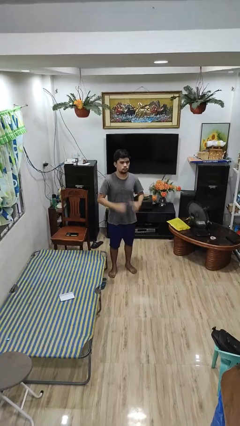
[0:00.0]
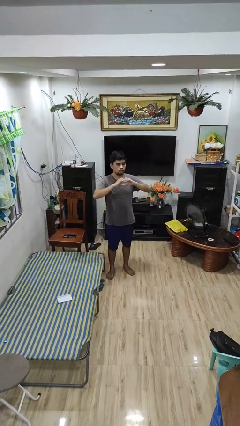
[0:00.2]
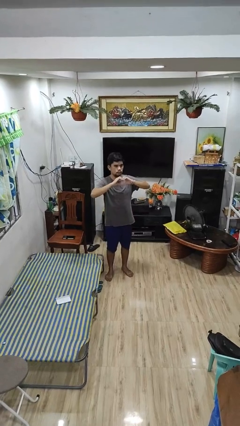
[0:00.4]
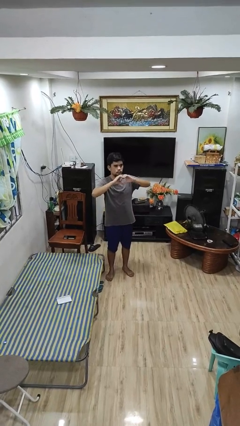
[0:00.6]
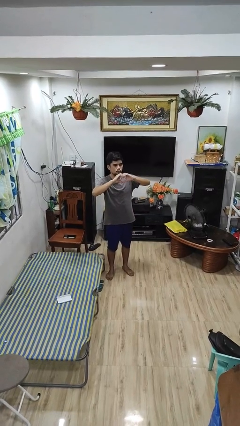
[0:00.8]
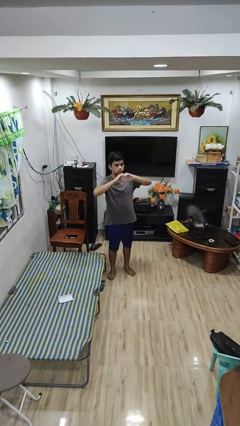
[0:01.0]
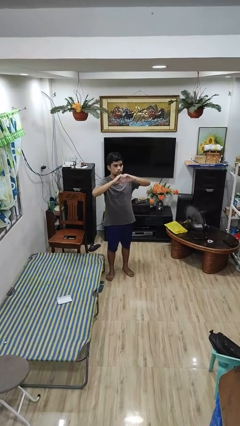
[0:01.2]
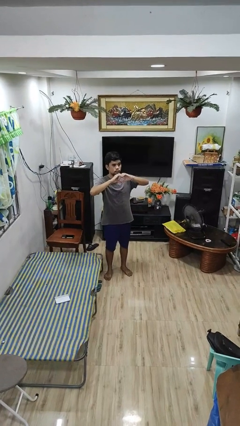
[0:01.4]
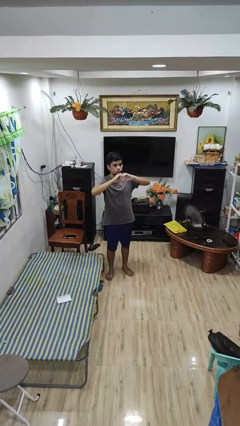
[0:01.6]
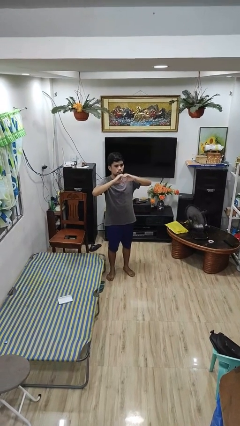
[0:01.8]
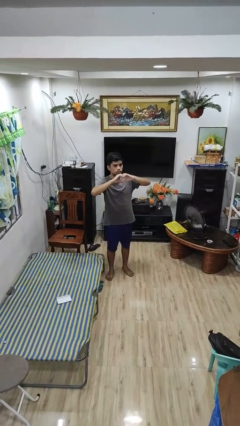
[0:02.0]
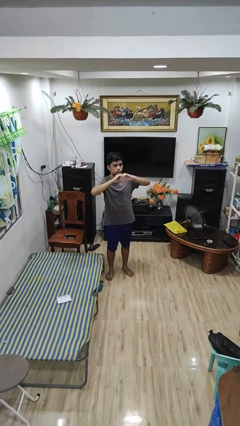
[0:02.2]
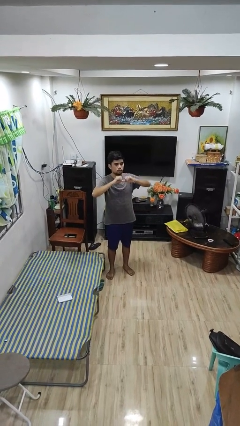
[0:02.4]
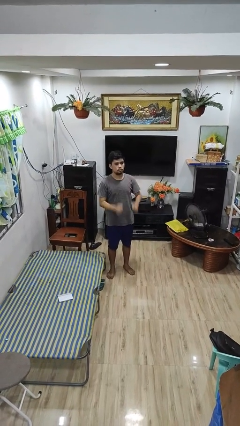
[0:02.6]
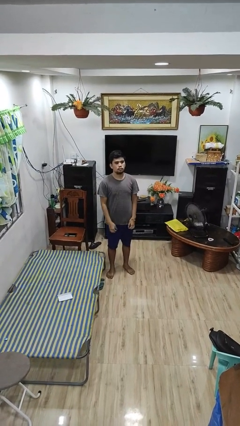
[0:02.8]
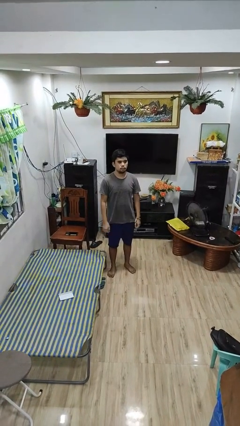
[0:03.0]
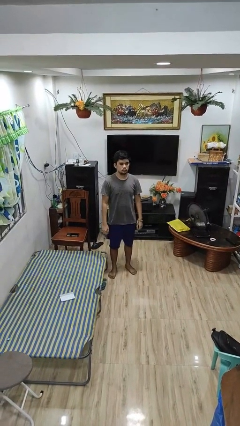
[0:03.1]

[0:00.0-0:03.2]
person gestures heart

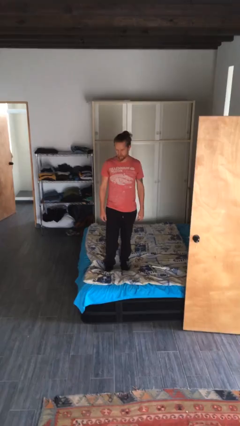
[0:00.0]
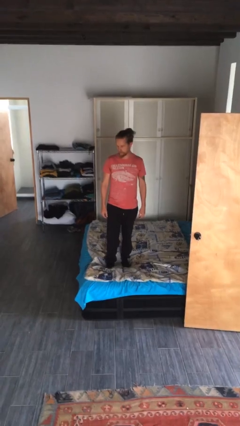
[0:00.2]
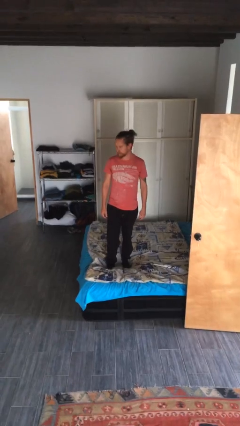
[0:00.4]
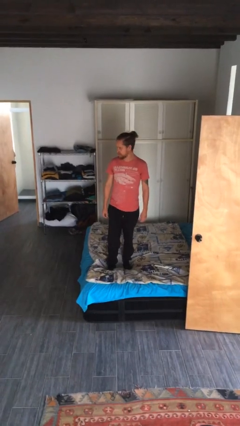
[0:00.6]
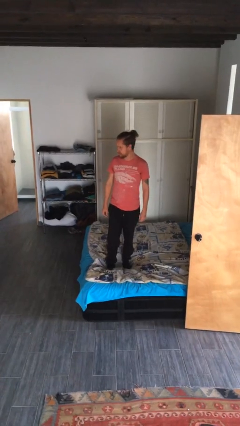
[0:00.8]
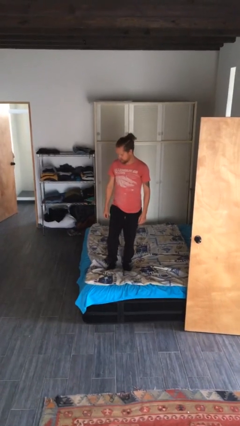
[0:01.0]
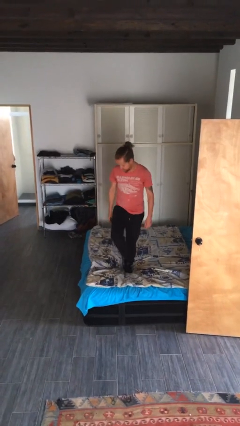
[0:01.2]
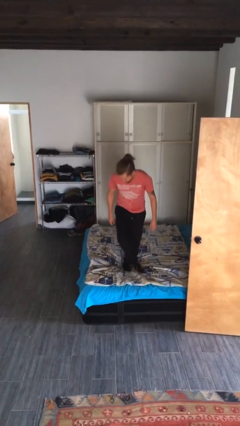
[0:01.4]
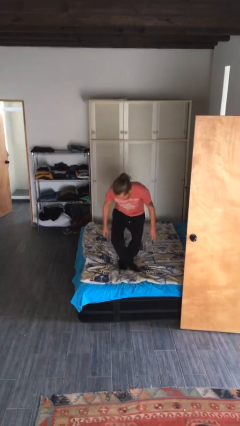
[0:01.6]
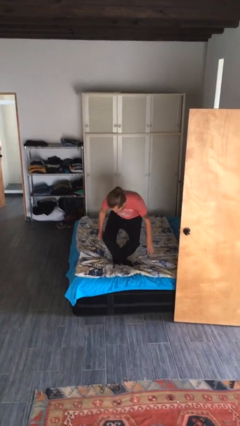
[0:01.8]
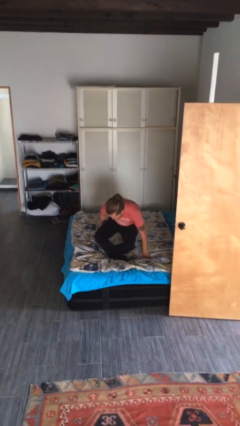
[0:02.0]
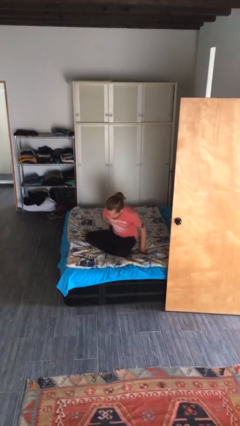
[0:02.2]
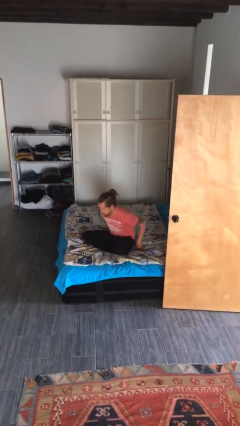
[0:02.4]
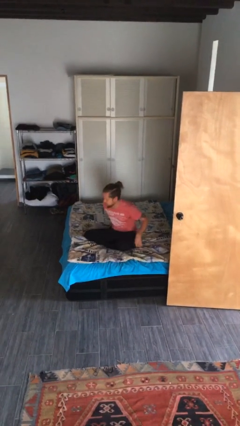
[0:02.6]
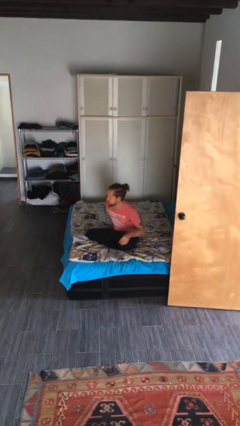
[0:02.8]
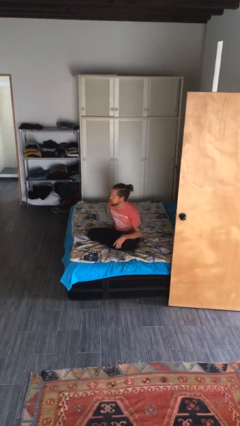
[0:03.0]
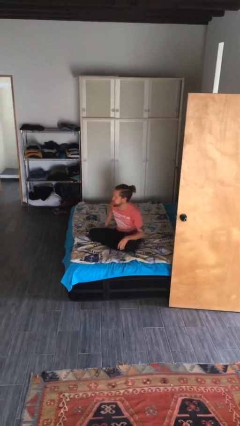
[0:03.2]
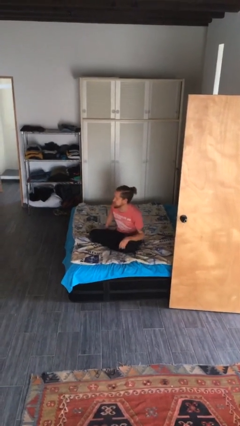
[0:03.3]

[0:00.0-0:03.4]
person sits crisscross

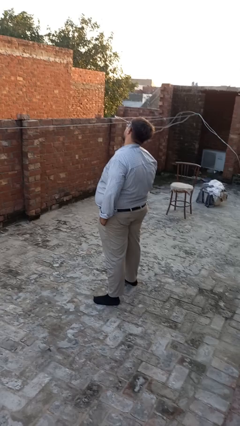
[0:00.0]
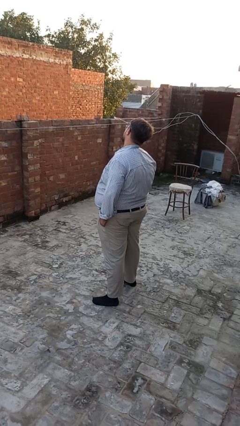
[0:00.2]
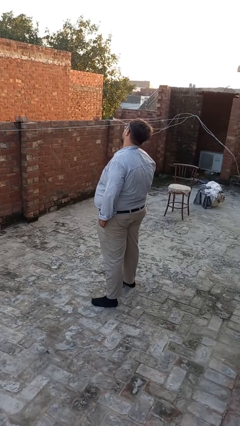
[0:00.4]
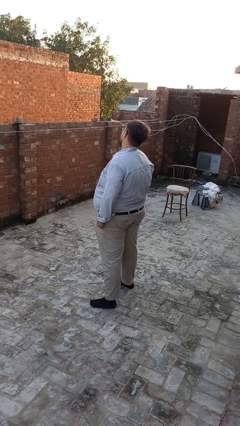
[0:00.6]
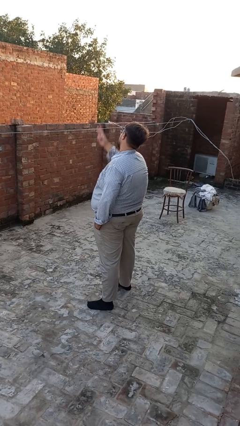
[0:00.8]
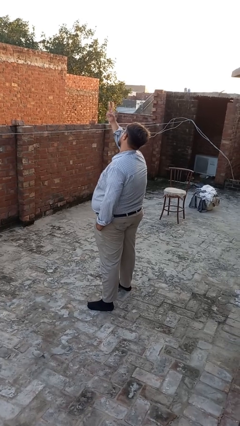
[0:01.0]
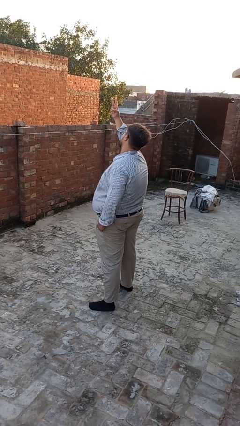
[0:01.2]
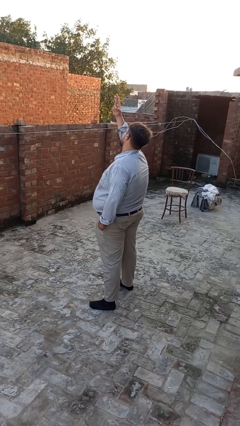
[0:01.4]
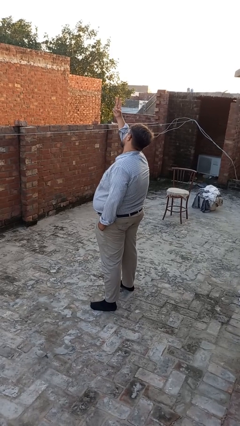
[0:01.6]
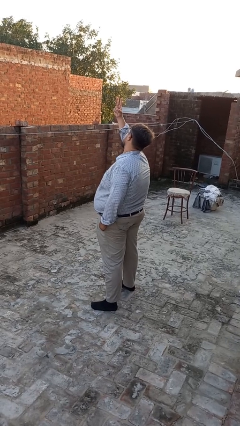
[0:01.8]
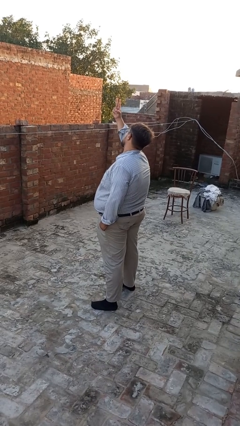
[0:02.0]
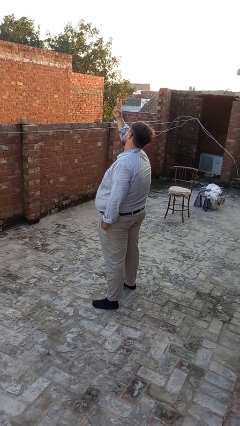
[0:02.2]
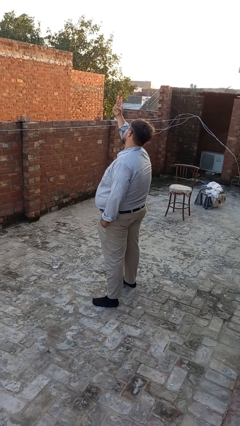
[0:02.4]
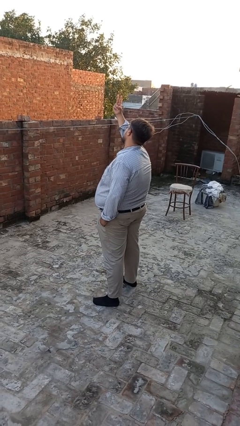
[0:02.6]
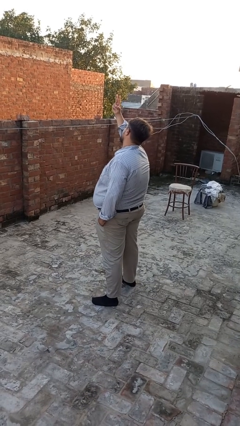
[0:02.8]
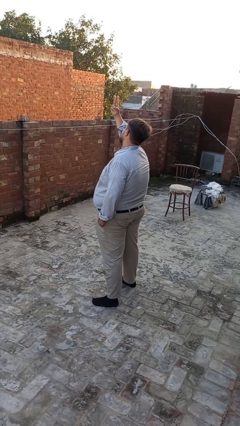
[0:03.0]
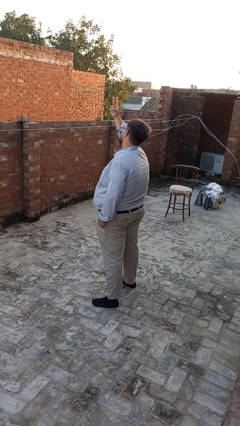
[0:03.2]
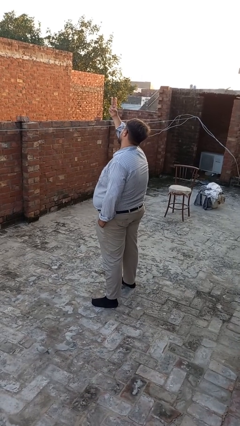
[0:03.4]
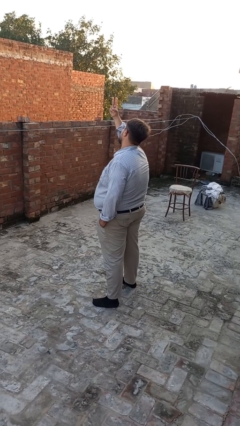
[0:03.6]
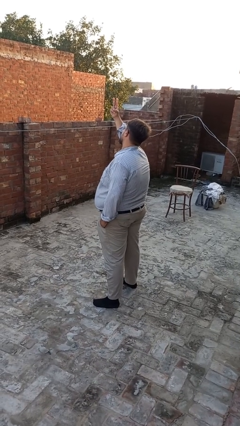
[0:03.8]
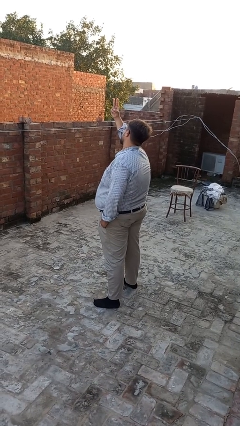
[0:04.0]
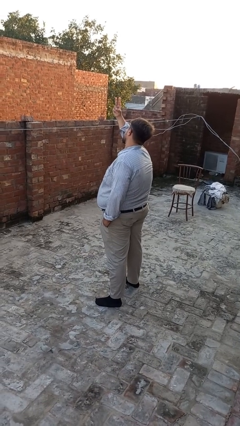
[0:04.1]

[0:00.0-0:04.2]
person gestures peace

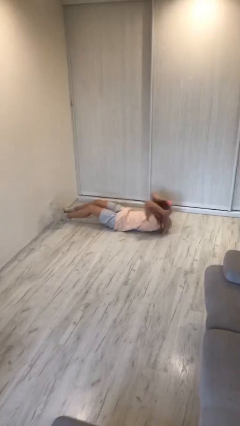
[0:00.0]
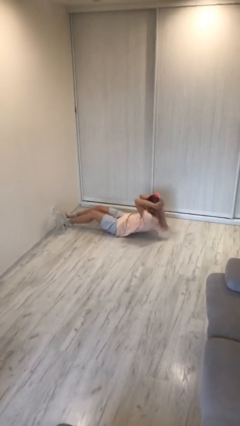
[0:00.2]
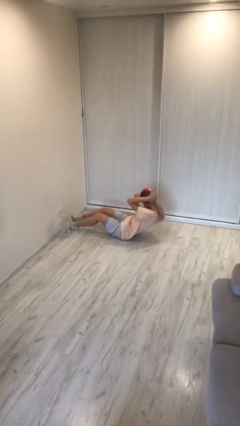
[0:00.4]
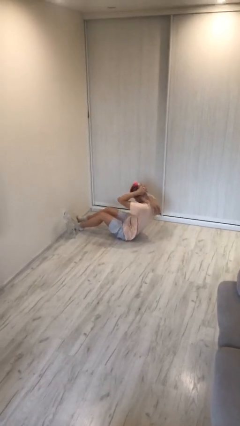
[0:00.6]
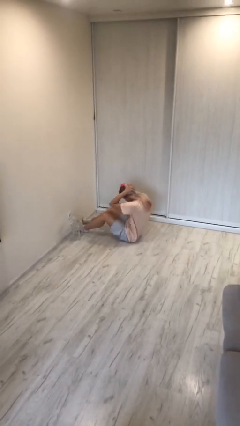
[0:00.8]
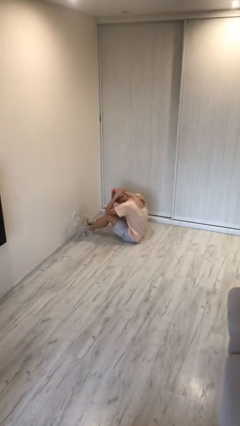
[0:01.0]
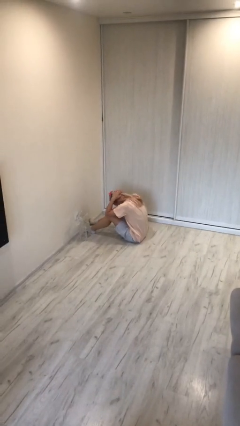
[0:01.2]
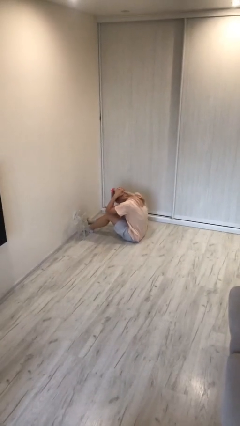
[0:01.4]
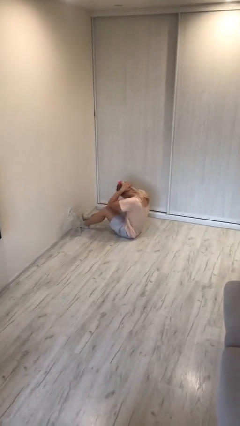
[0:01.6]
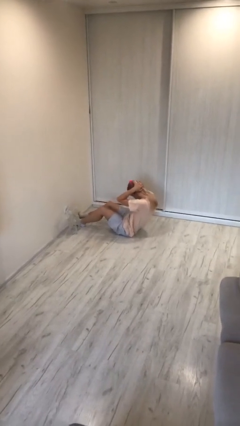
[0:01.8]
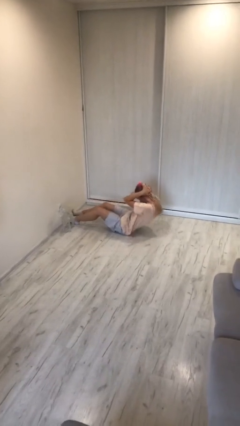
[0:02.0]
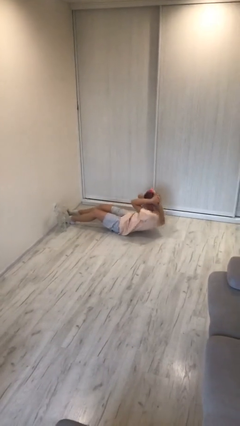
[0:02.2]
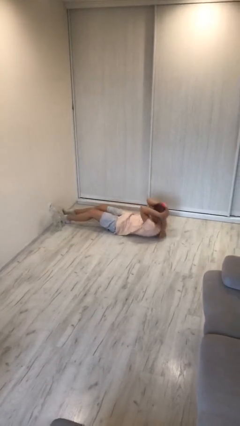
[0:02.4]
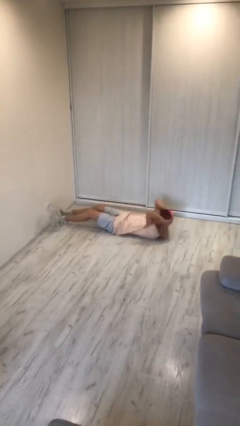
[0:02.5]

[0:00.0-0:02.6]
person exercises with situp

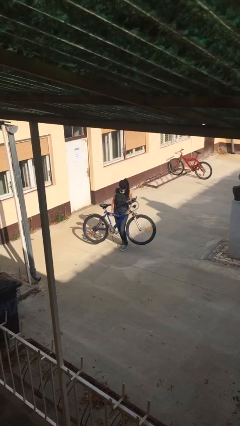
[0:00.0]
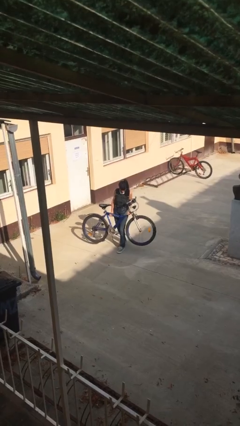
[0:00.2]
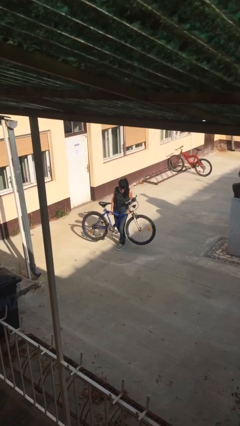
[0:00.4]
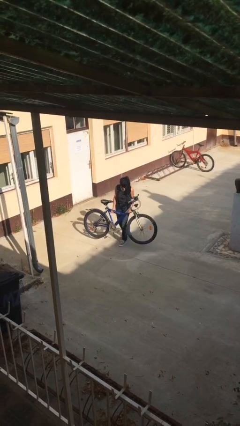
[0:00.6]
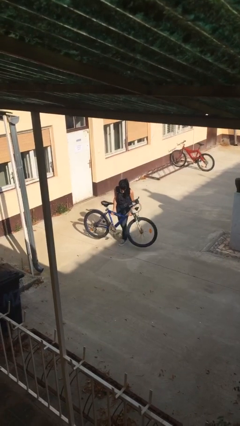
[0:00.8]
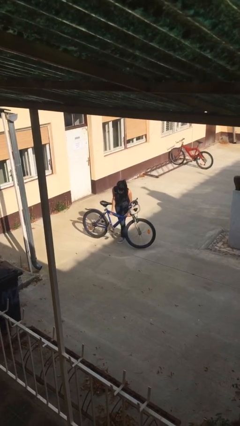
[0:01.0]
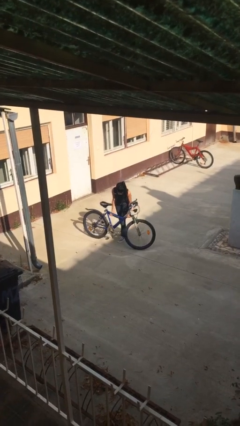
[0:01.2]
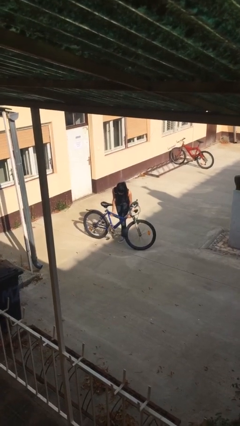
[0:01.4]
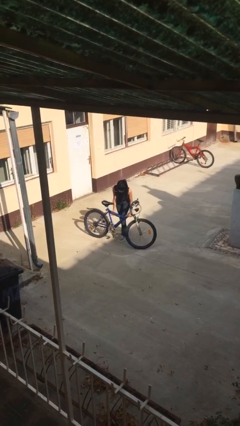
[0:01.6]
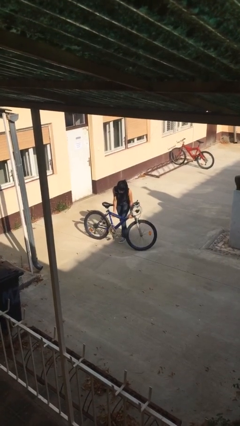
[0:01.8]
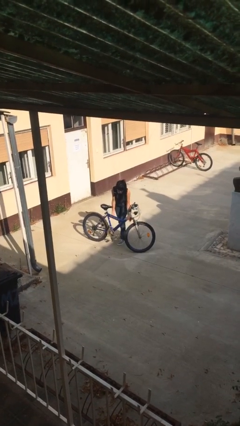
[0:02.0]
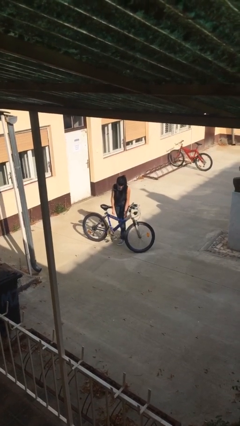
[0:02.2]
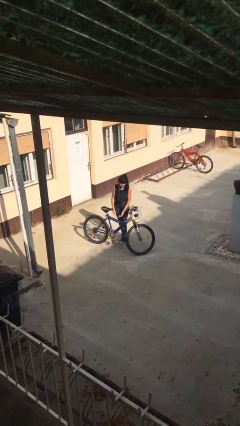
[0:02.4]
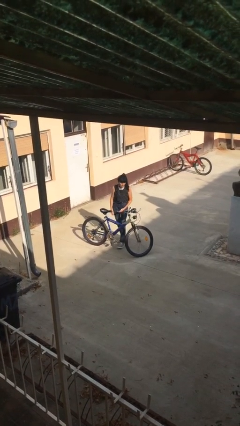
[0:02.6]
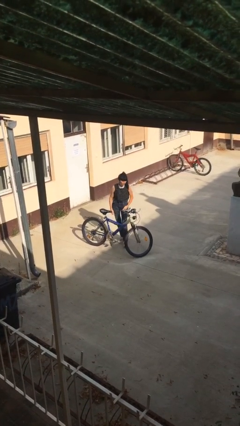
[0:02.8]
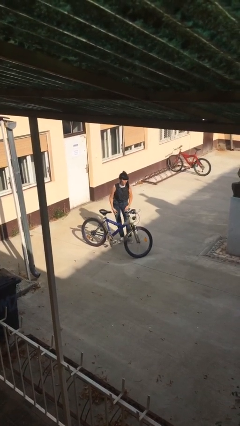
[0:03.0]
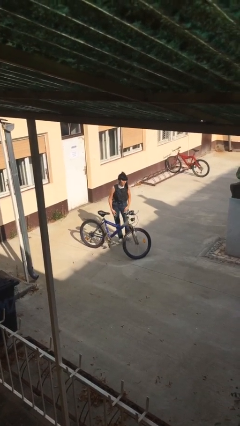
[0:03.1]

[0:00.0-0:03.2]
person puts down object on floor

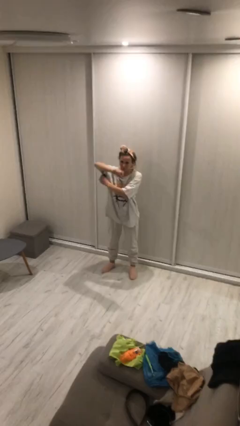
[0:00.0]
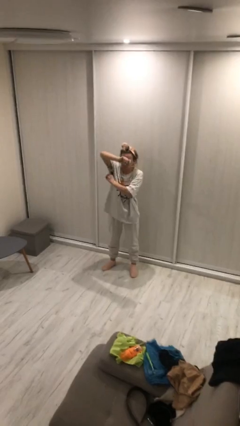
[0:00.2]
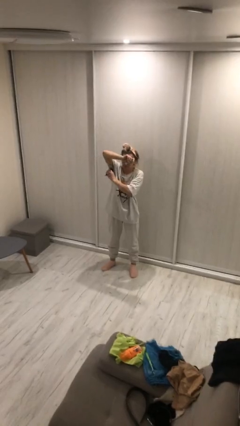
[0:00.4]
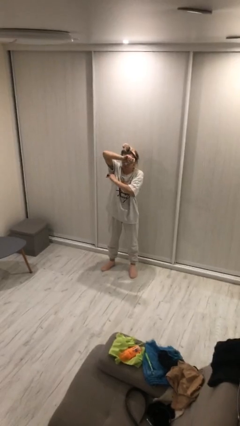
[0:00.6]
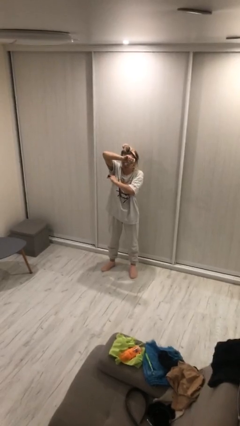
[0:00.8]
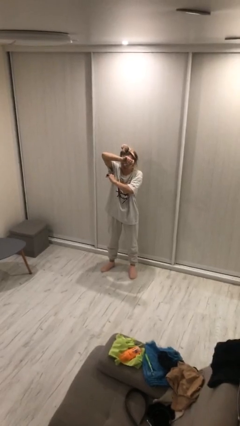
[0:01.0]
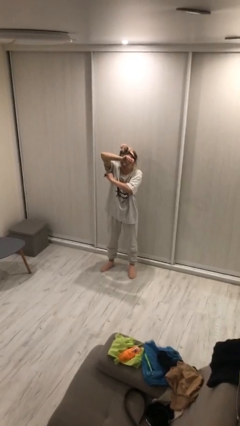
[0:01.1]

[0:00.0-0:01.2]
person applies deodorant
